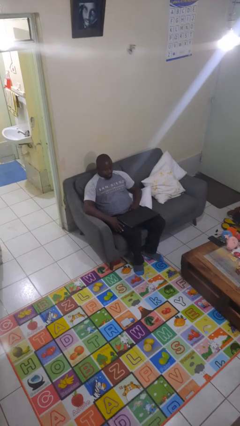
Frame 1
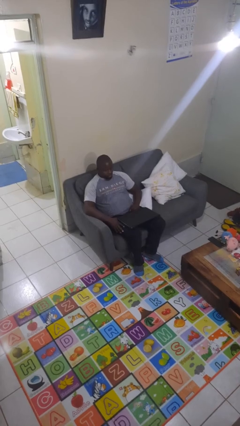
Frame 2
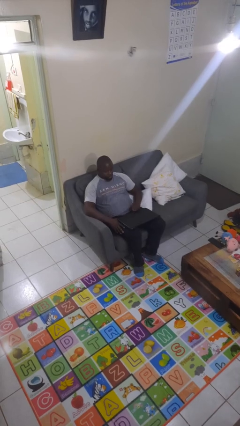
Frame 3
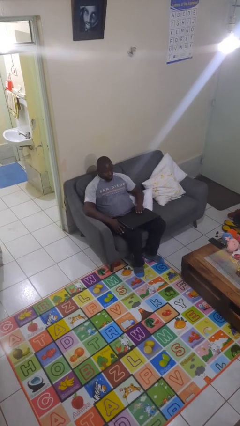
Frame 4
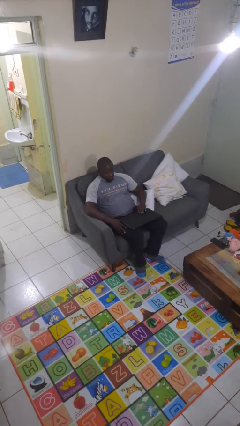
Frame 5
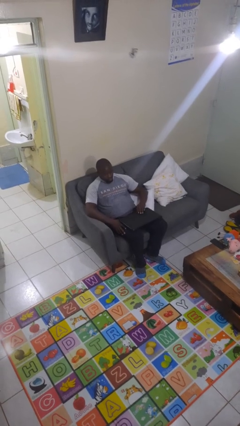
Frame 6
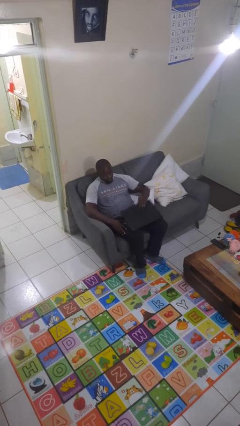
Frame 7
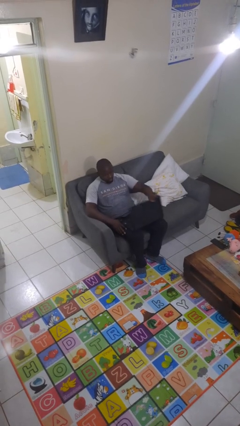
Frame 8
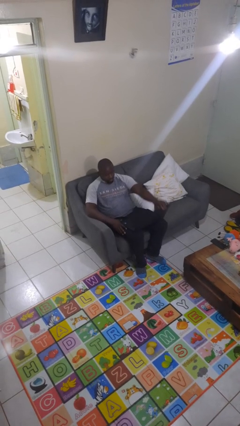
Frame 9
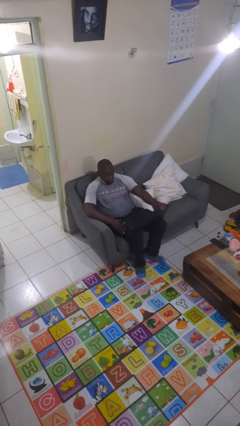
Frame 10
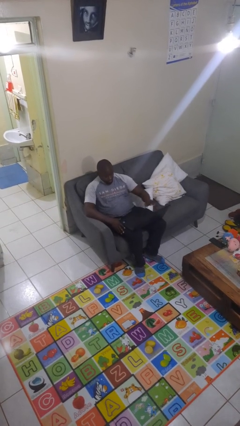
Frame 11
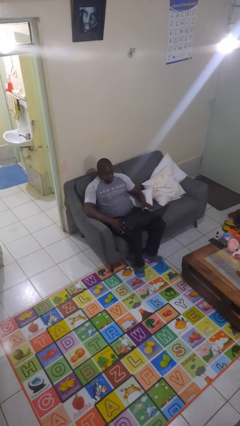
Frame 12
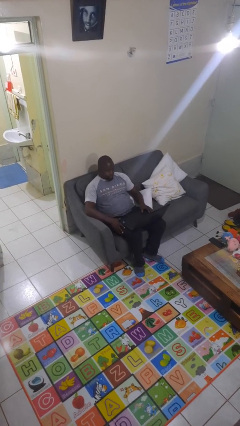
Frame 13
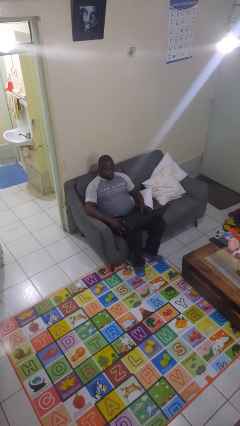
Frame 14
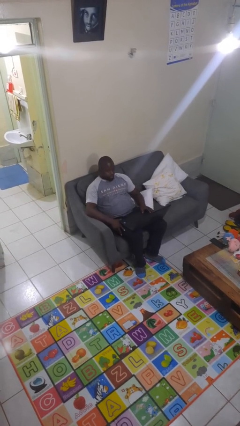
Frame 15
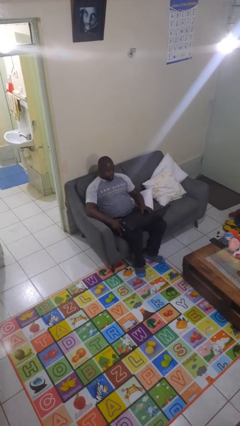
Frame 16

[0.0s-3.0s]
person opens laptop

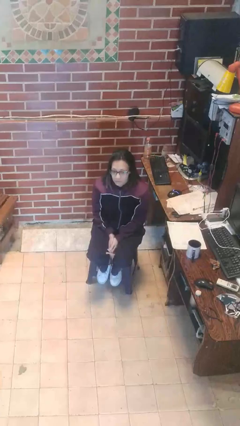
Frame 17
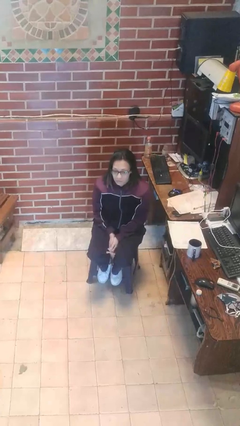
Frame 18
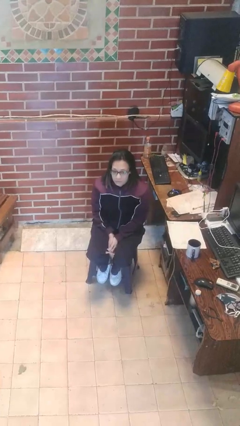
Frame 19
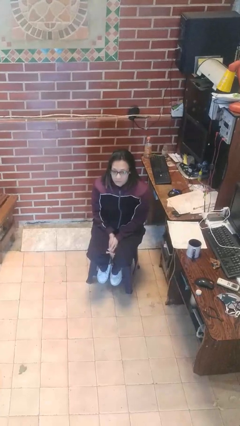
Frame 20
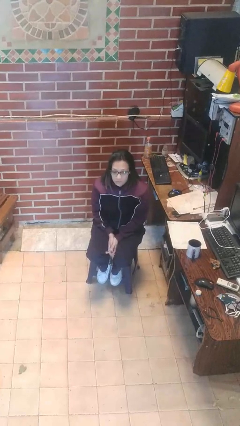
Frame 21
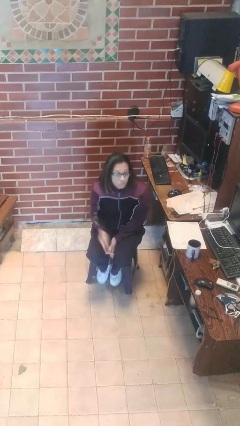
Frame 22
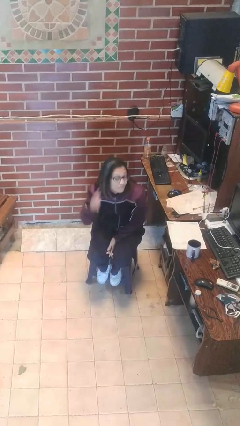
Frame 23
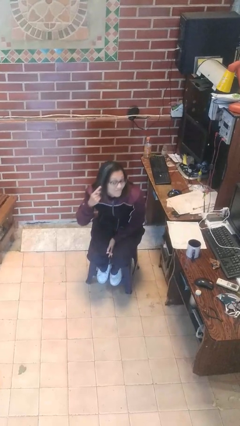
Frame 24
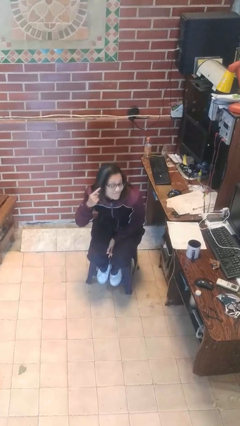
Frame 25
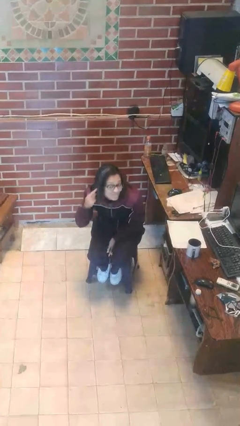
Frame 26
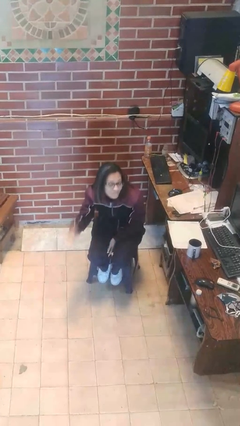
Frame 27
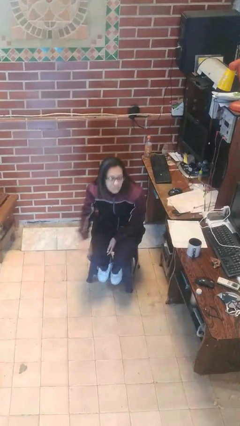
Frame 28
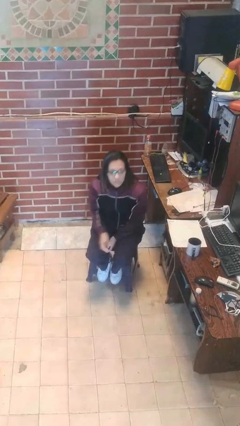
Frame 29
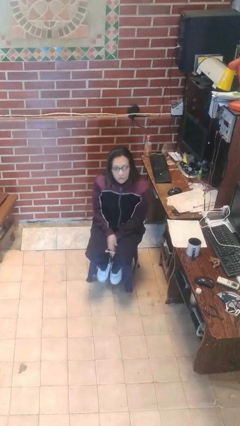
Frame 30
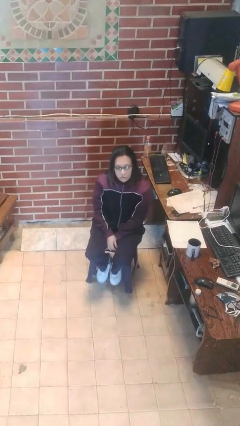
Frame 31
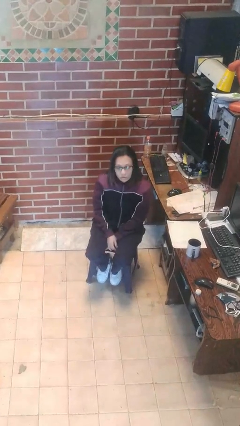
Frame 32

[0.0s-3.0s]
person gestures listen closely

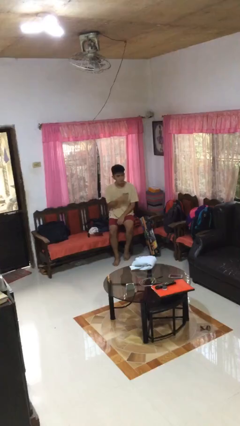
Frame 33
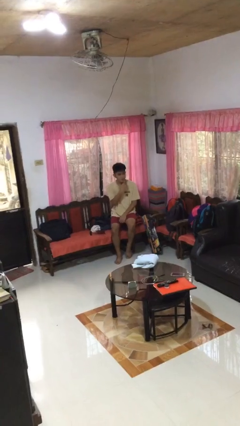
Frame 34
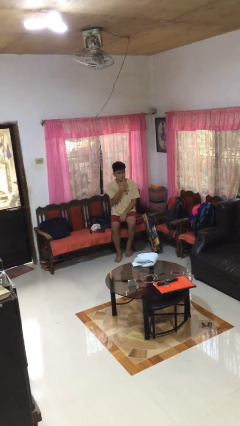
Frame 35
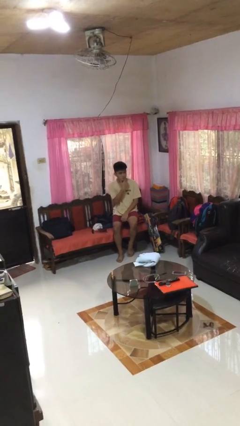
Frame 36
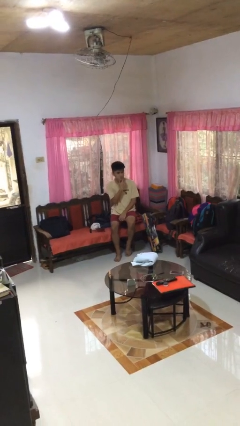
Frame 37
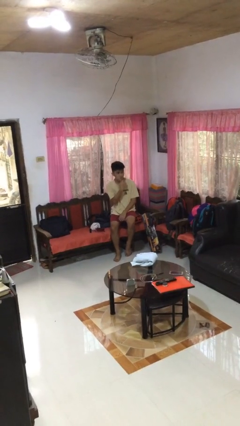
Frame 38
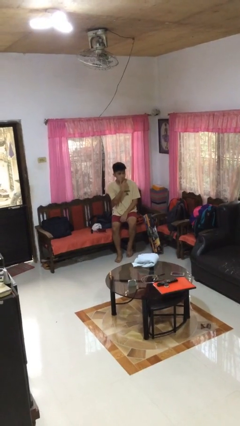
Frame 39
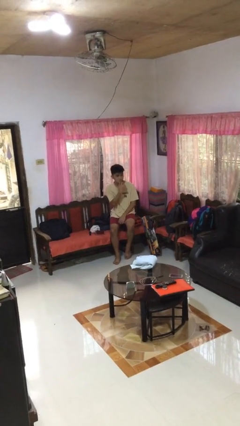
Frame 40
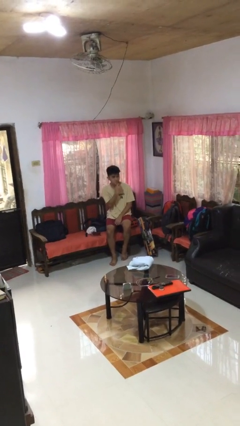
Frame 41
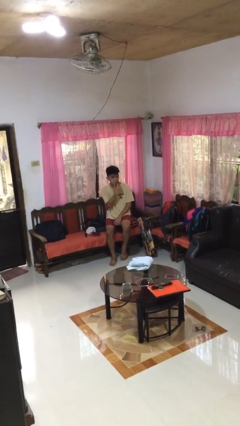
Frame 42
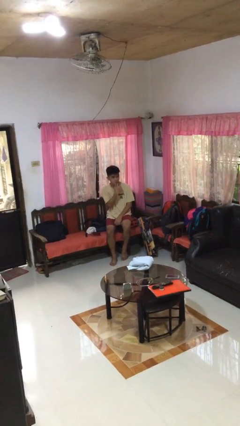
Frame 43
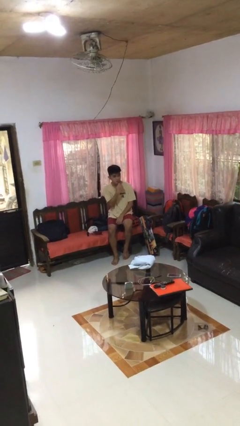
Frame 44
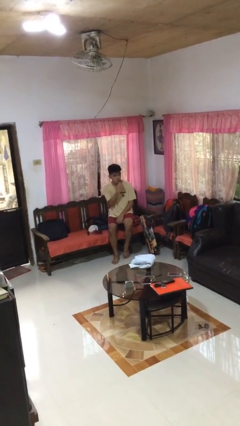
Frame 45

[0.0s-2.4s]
person strokes chin

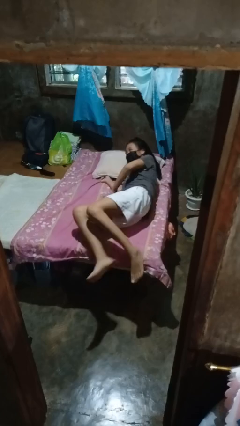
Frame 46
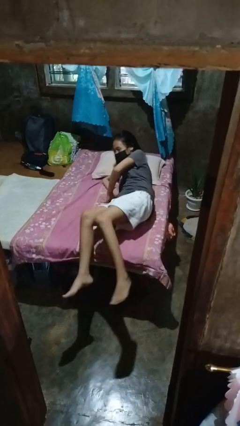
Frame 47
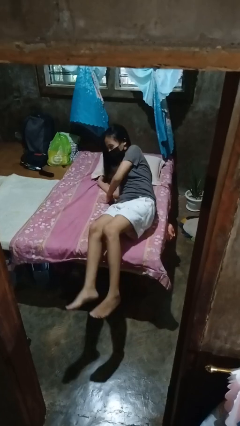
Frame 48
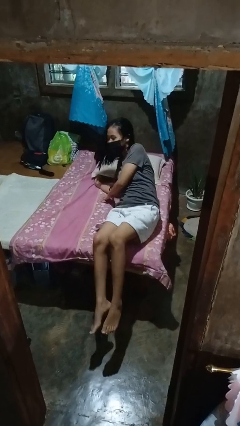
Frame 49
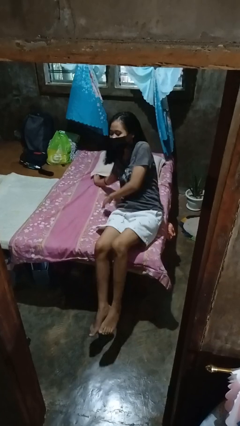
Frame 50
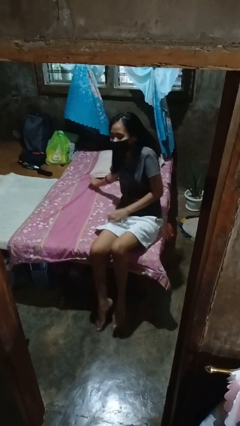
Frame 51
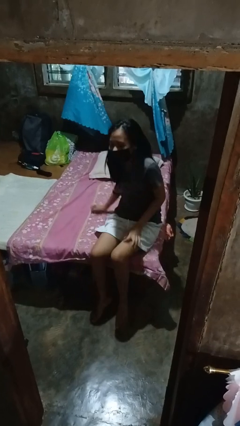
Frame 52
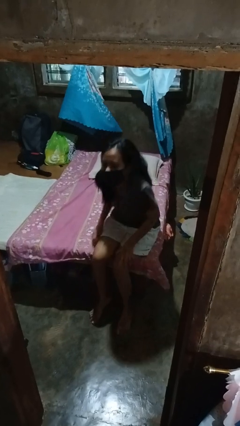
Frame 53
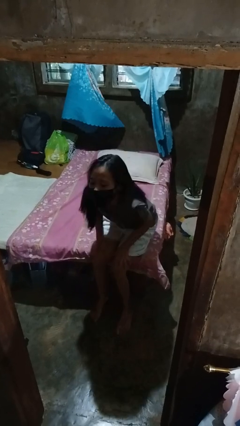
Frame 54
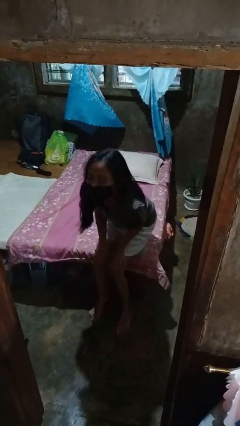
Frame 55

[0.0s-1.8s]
person stands up

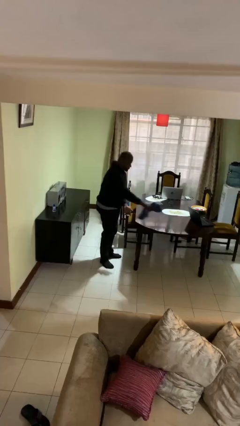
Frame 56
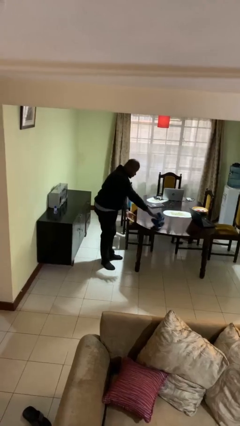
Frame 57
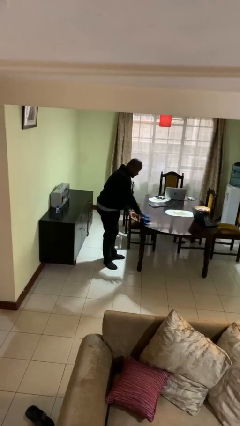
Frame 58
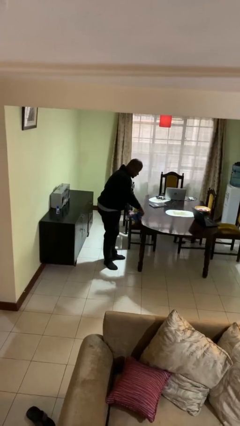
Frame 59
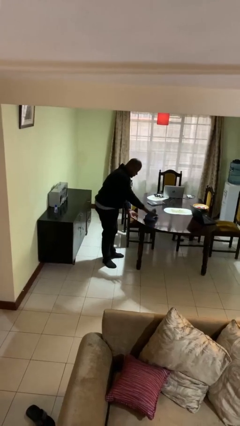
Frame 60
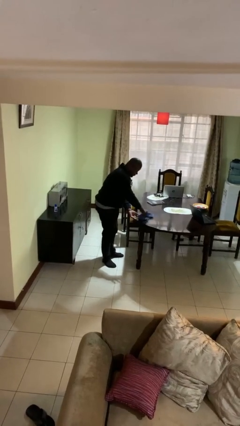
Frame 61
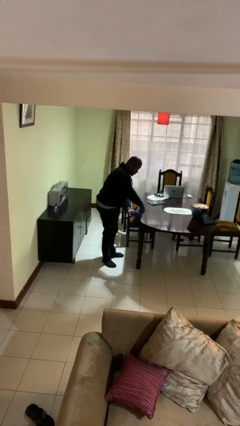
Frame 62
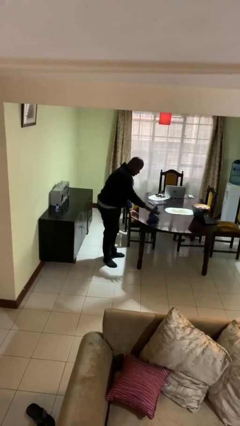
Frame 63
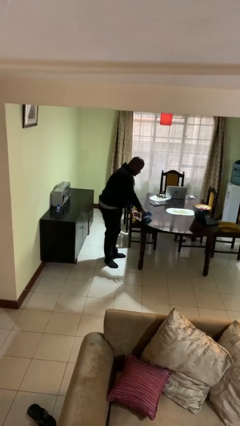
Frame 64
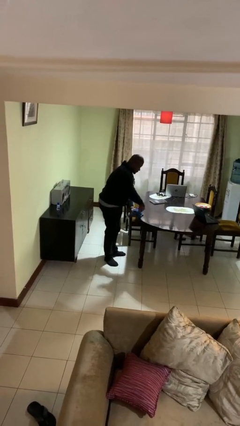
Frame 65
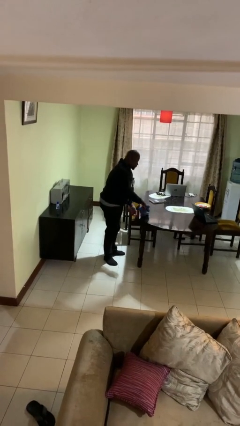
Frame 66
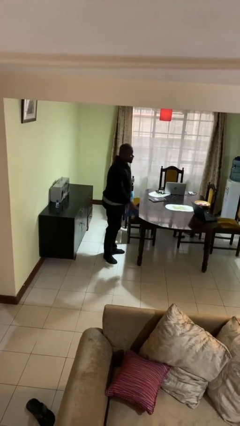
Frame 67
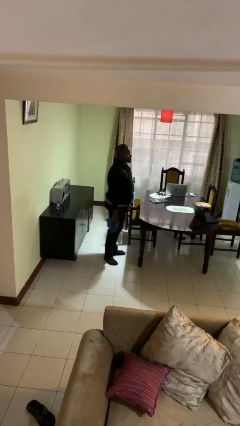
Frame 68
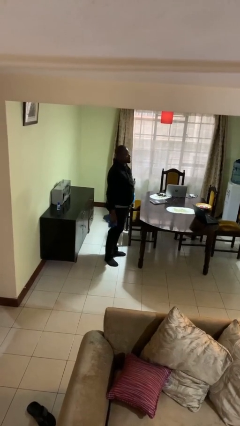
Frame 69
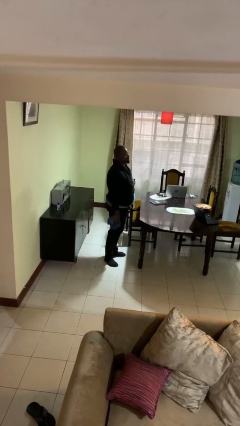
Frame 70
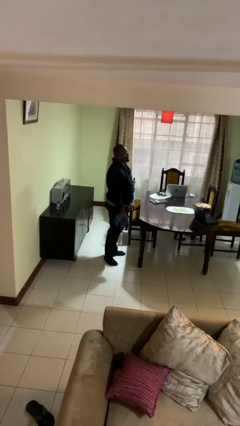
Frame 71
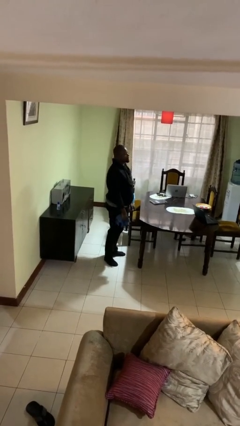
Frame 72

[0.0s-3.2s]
person cleans table with rag

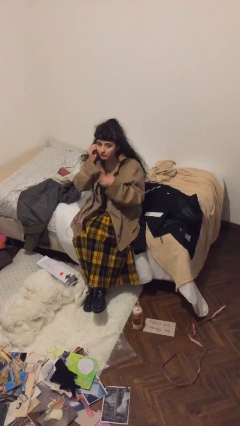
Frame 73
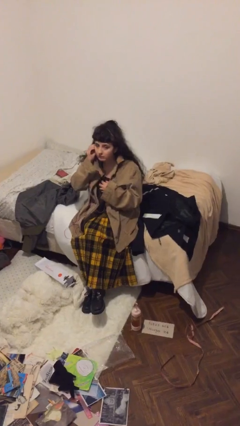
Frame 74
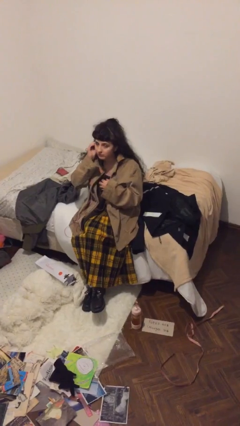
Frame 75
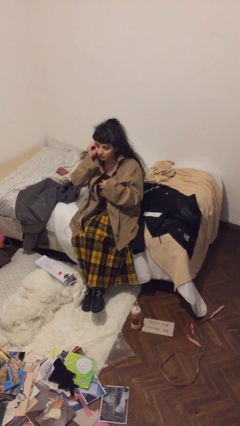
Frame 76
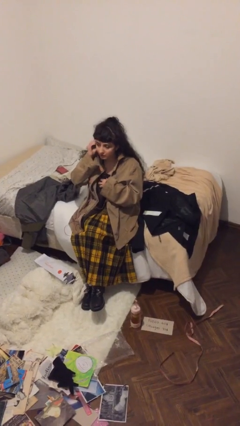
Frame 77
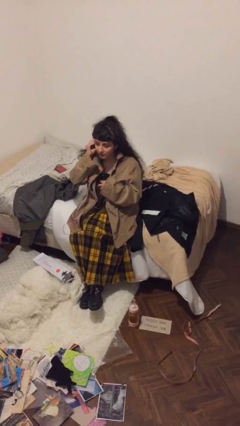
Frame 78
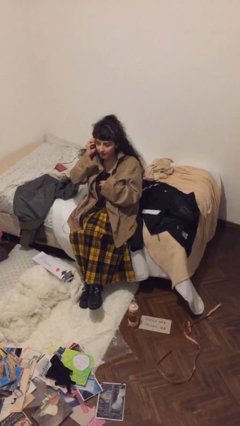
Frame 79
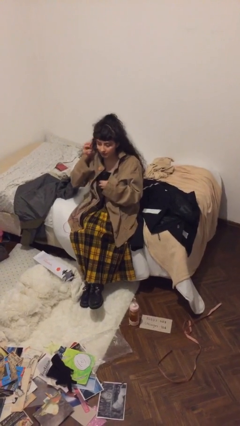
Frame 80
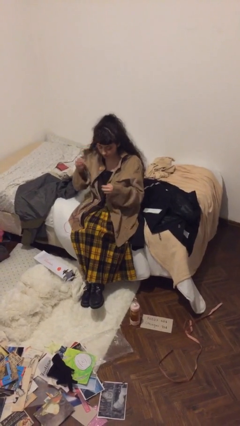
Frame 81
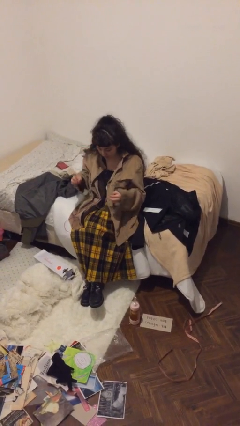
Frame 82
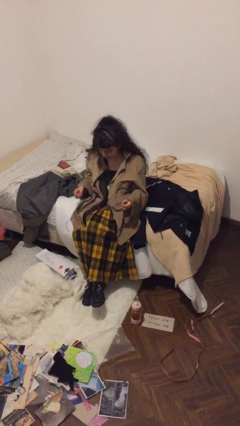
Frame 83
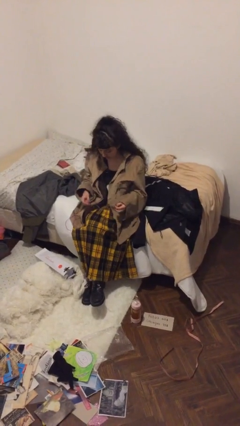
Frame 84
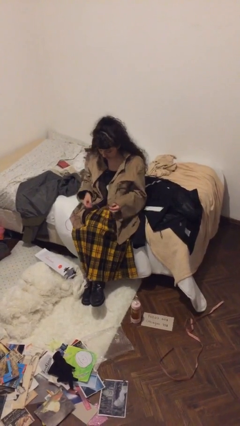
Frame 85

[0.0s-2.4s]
person takes off headphones

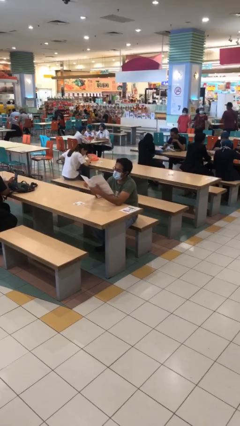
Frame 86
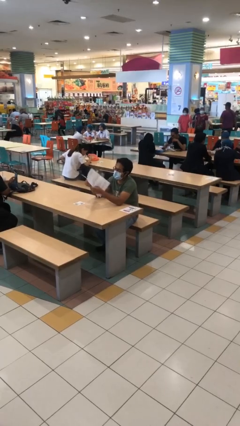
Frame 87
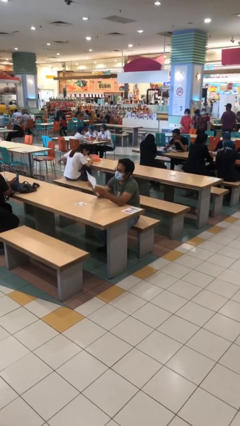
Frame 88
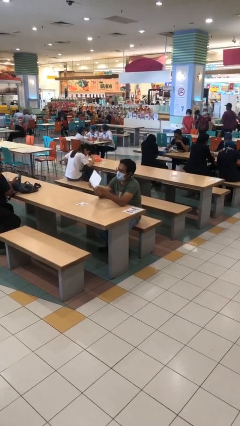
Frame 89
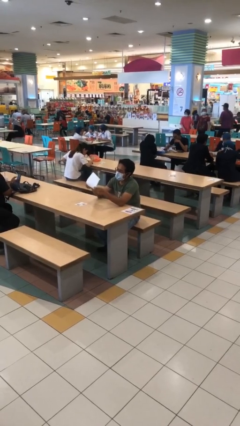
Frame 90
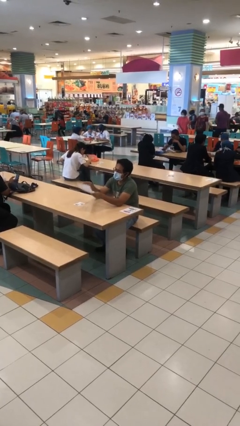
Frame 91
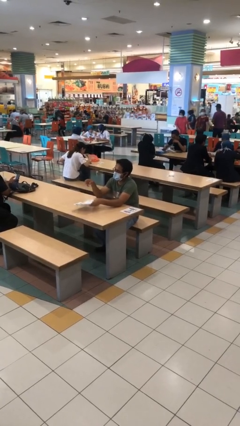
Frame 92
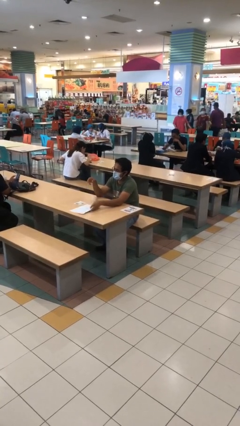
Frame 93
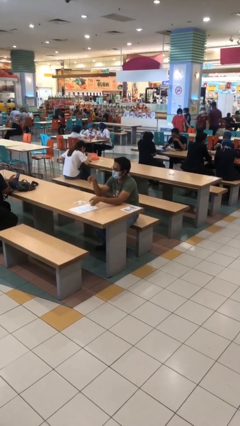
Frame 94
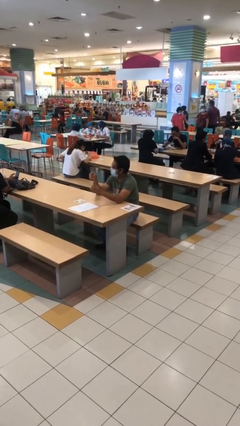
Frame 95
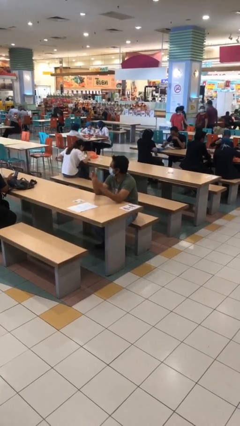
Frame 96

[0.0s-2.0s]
person puts down object on table
